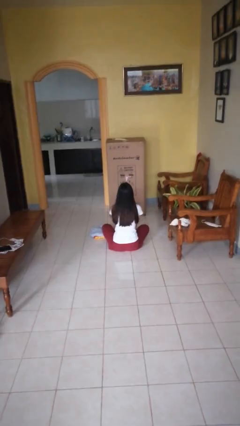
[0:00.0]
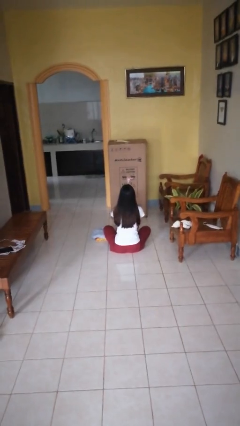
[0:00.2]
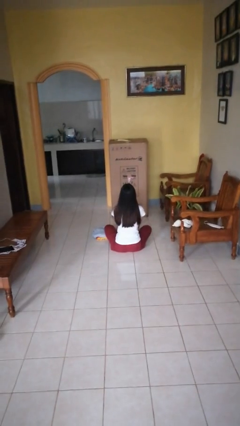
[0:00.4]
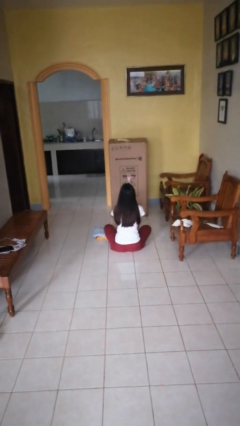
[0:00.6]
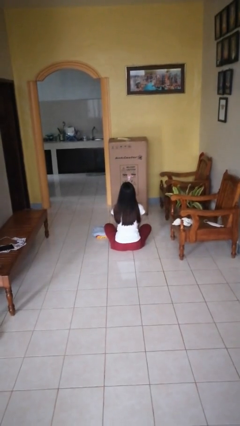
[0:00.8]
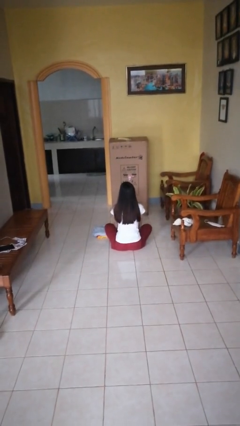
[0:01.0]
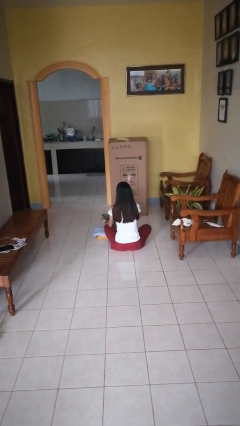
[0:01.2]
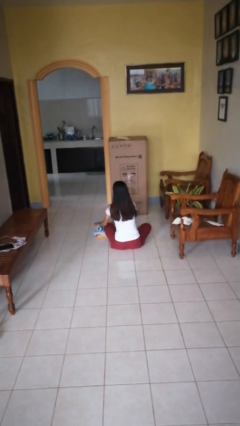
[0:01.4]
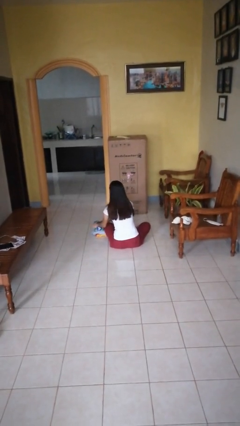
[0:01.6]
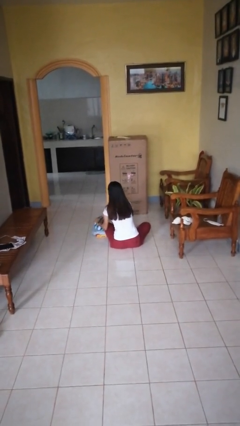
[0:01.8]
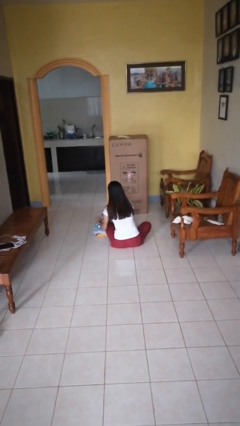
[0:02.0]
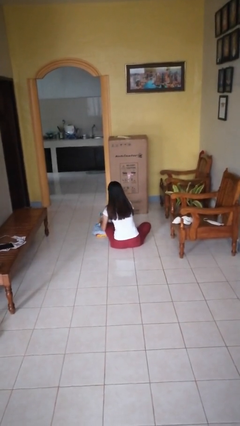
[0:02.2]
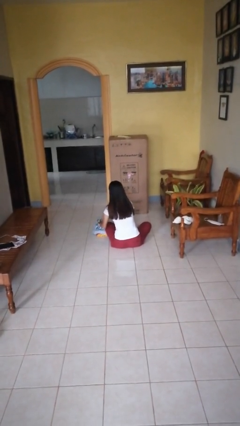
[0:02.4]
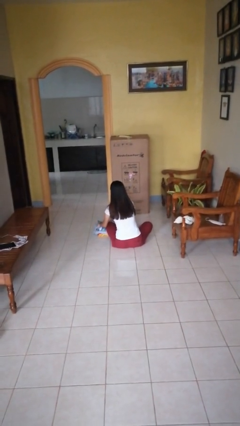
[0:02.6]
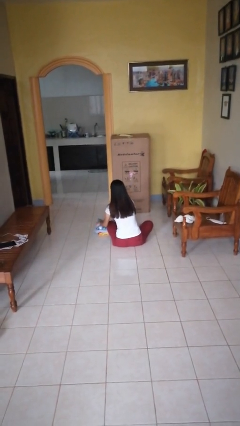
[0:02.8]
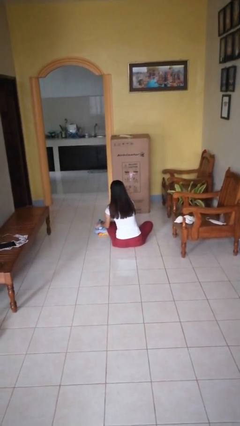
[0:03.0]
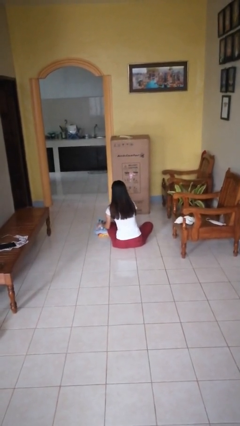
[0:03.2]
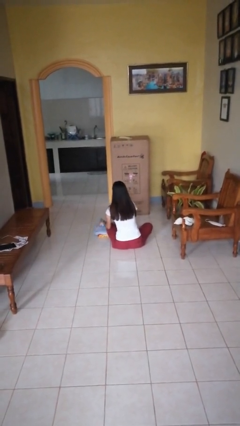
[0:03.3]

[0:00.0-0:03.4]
person folds towel

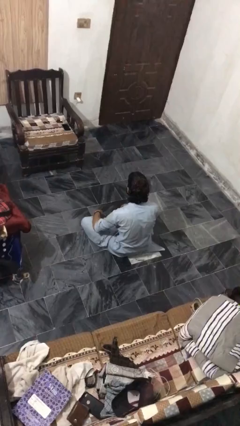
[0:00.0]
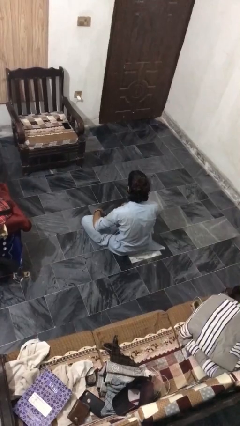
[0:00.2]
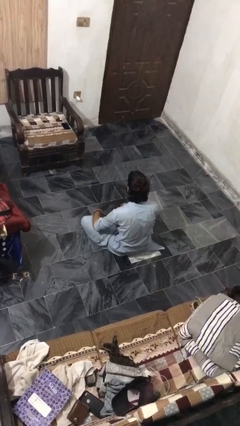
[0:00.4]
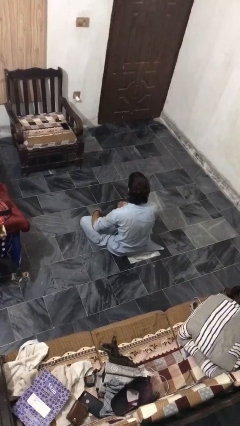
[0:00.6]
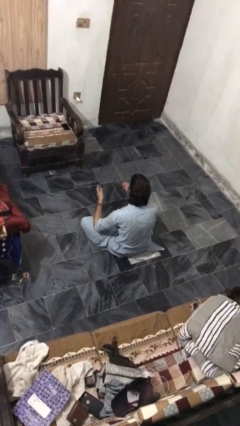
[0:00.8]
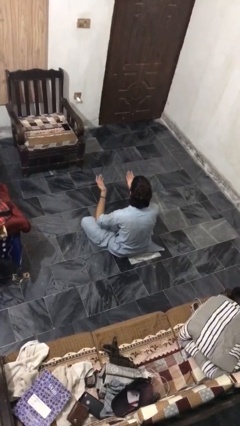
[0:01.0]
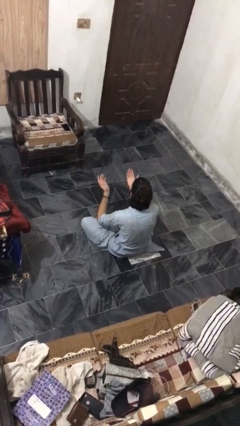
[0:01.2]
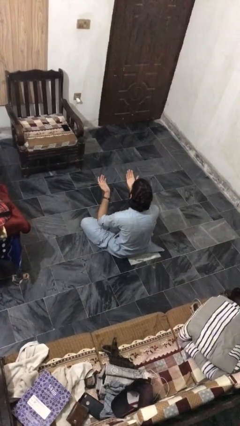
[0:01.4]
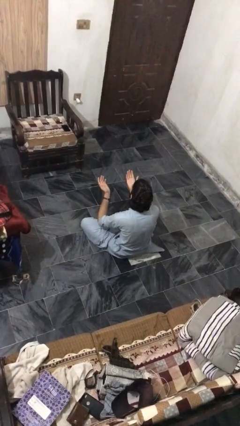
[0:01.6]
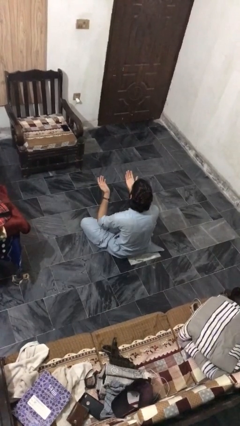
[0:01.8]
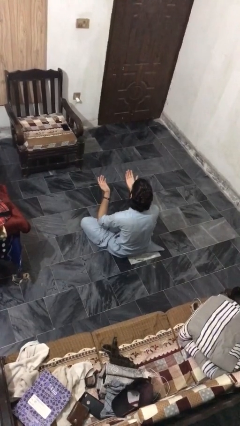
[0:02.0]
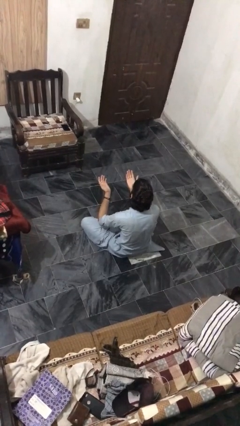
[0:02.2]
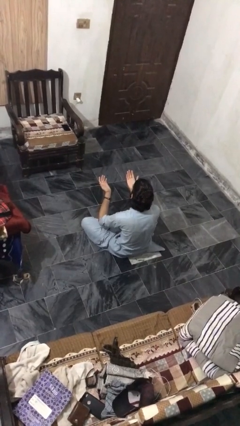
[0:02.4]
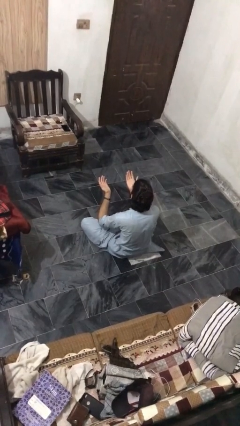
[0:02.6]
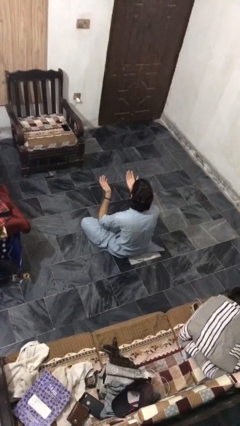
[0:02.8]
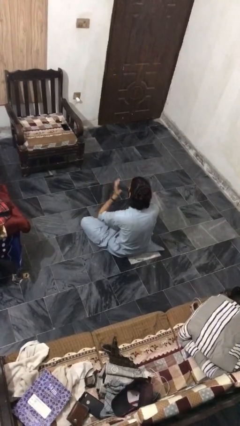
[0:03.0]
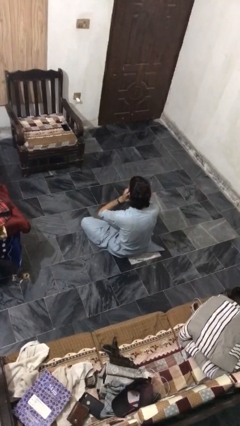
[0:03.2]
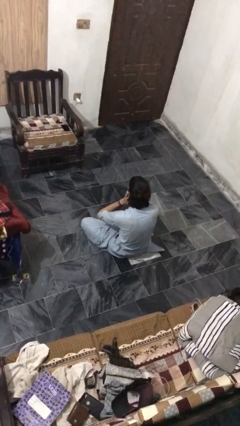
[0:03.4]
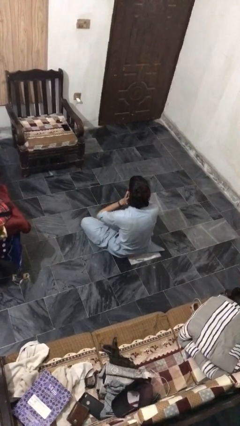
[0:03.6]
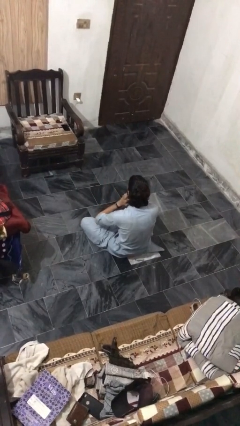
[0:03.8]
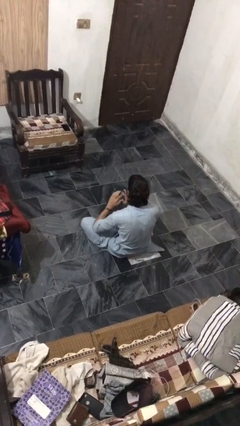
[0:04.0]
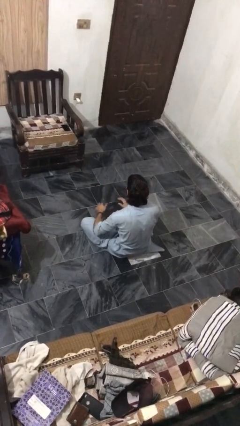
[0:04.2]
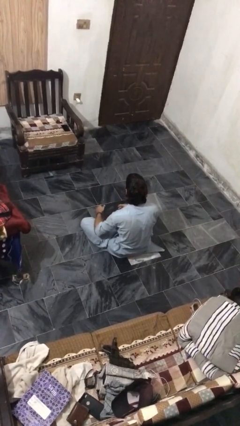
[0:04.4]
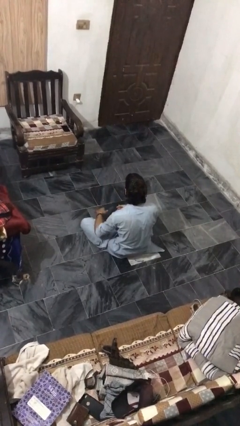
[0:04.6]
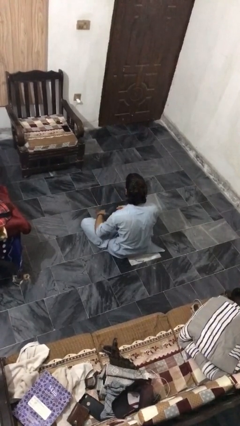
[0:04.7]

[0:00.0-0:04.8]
person prays

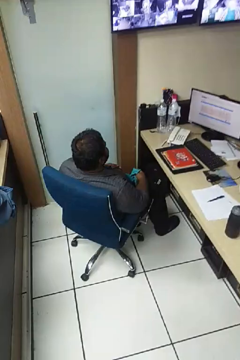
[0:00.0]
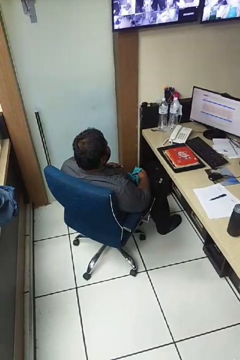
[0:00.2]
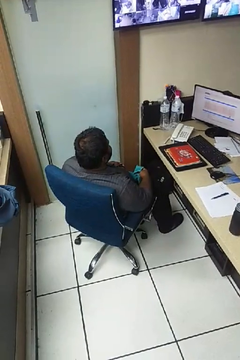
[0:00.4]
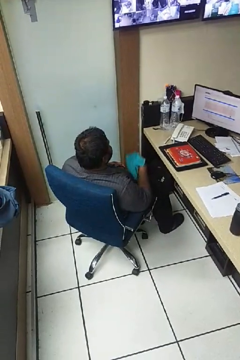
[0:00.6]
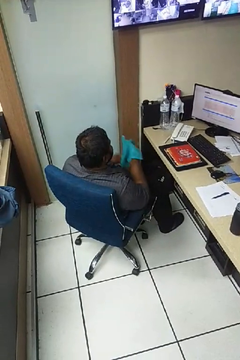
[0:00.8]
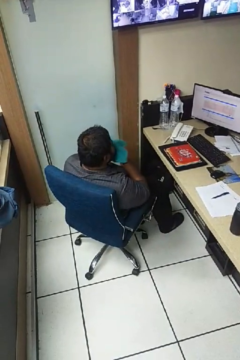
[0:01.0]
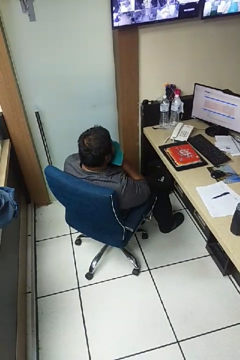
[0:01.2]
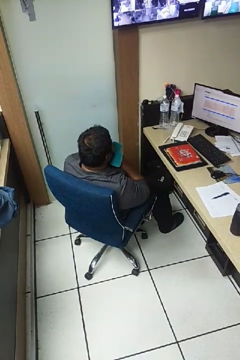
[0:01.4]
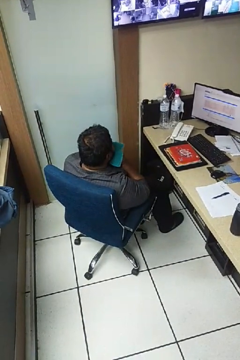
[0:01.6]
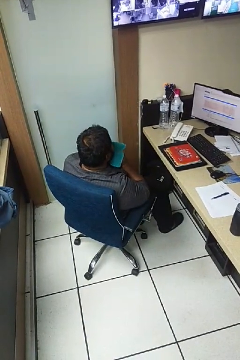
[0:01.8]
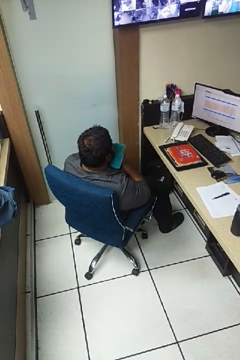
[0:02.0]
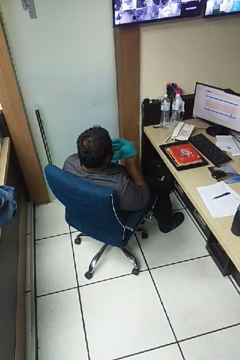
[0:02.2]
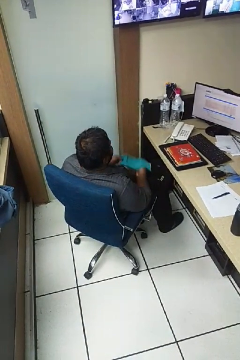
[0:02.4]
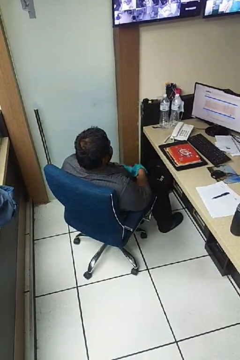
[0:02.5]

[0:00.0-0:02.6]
person wipes mouth with napkin

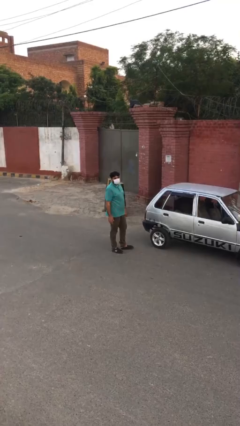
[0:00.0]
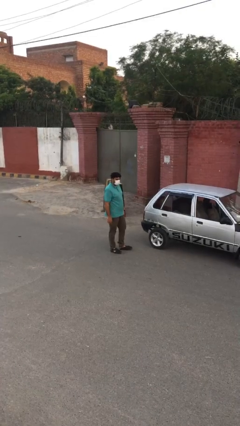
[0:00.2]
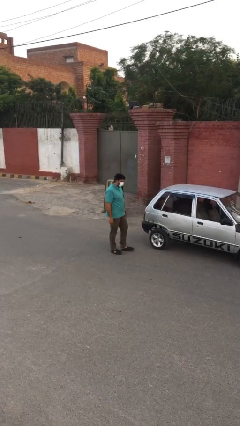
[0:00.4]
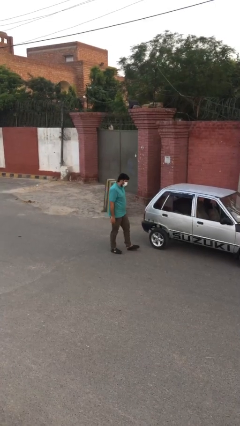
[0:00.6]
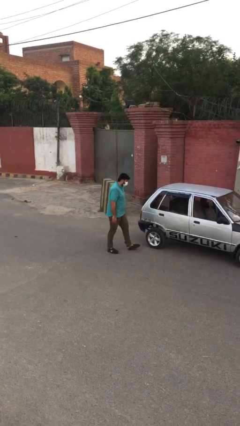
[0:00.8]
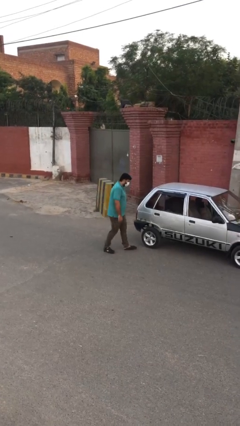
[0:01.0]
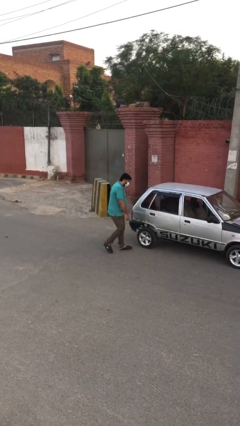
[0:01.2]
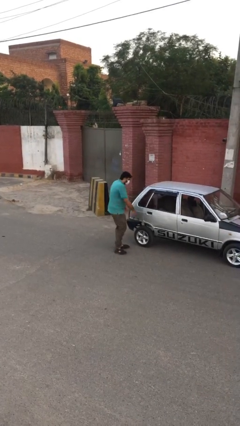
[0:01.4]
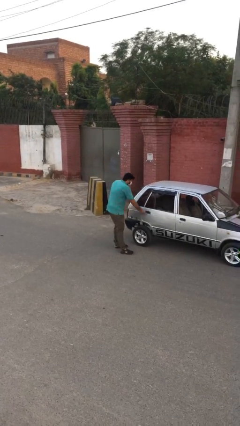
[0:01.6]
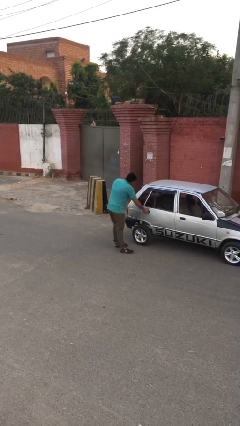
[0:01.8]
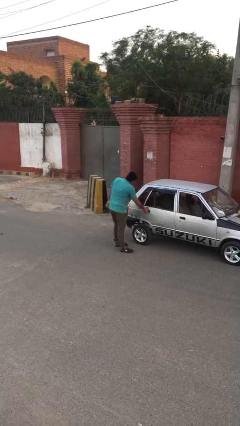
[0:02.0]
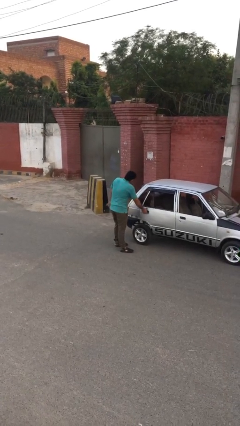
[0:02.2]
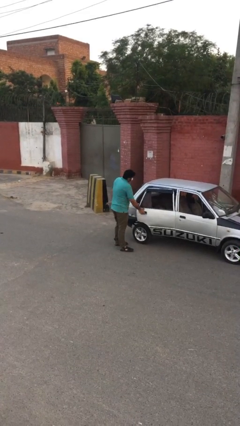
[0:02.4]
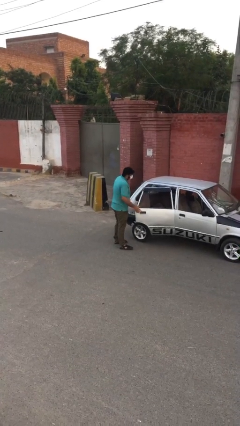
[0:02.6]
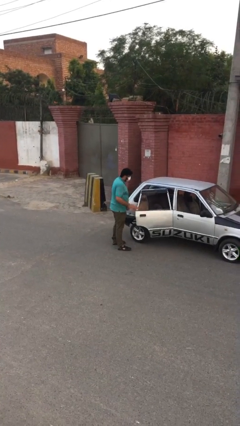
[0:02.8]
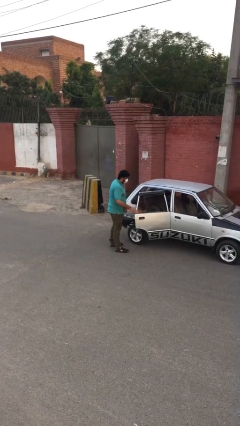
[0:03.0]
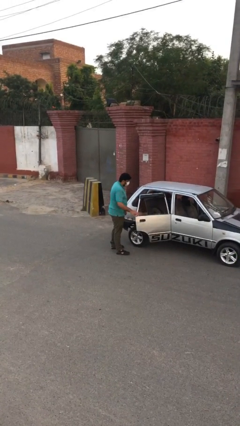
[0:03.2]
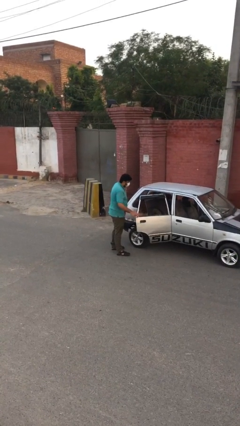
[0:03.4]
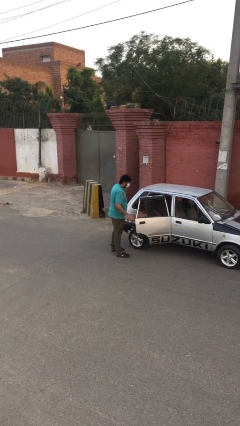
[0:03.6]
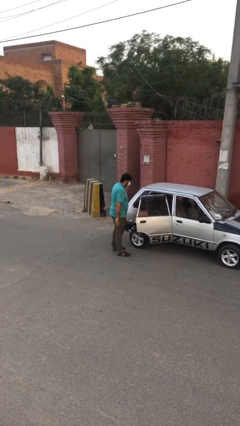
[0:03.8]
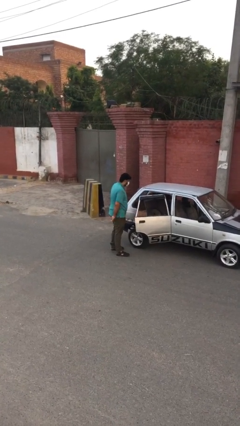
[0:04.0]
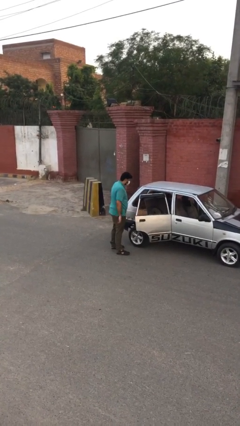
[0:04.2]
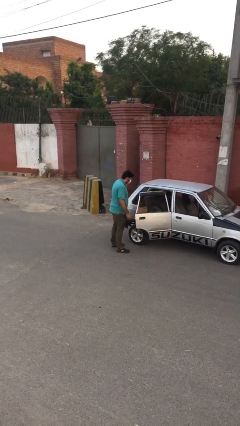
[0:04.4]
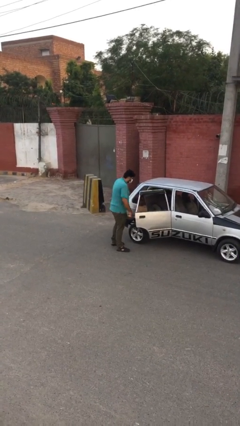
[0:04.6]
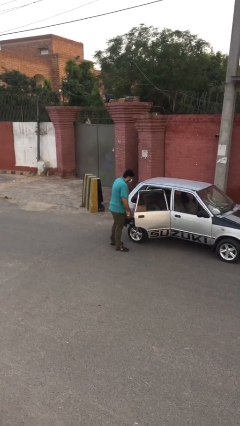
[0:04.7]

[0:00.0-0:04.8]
person opens car door

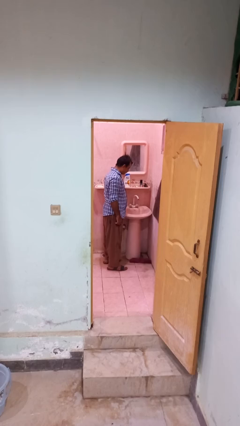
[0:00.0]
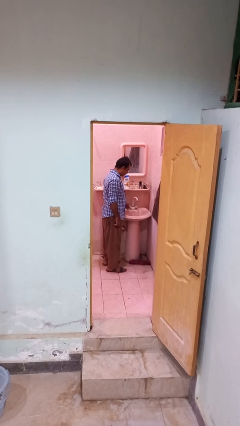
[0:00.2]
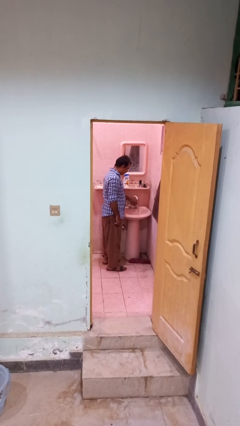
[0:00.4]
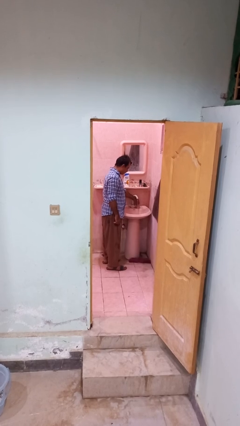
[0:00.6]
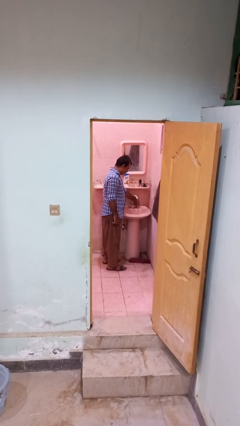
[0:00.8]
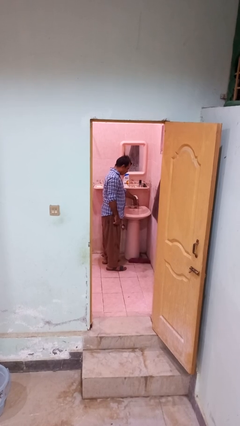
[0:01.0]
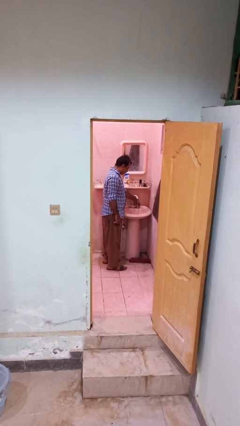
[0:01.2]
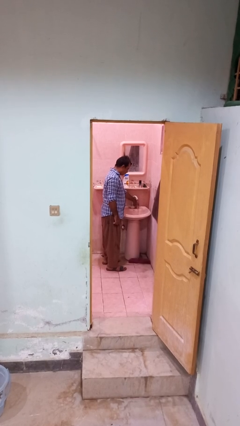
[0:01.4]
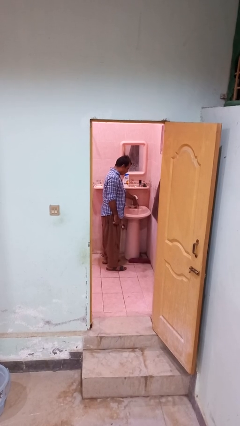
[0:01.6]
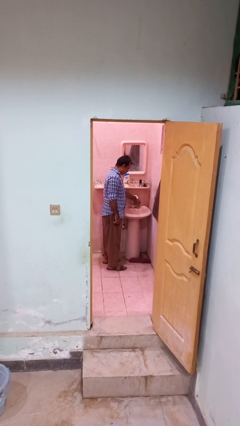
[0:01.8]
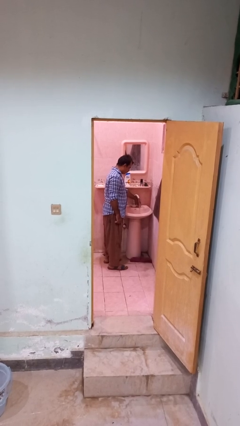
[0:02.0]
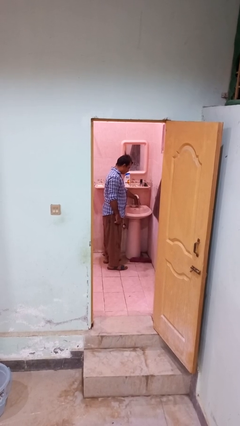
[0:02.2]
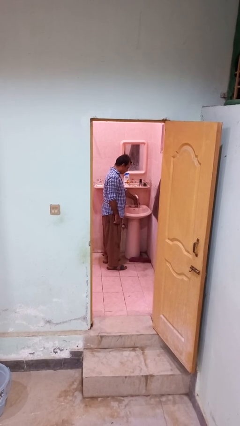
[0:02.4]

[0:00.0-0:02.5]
person closes clothes washer
